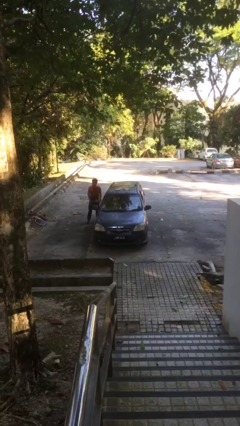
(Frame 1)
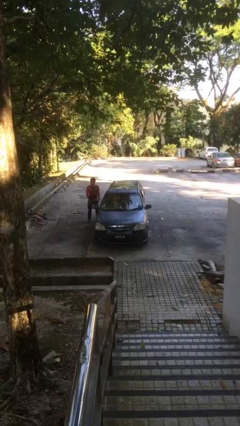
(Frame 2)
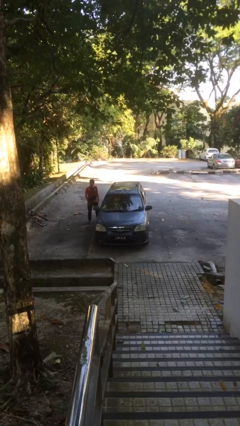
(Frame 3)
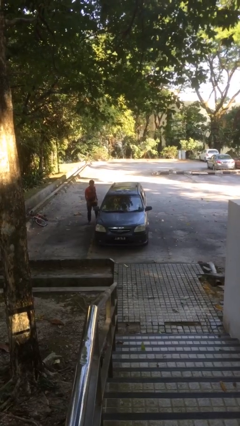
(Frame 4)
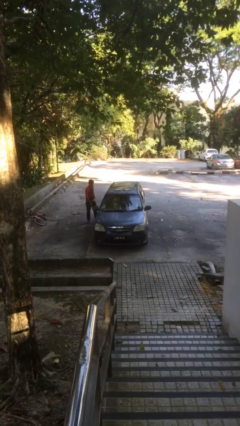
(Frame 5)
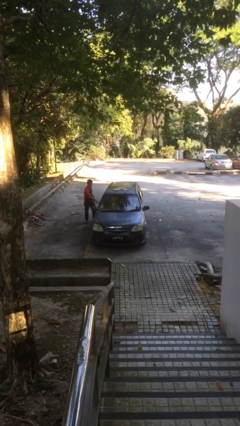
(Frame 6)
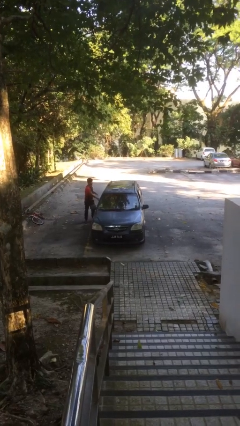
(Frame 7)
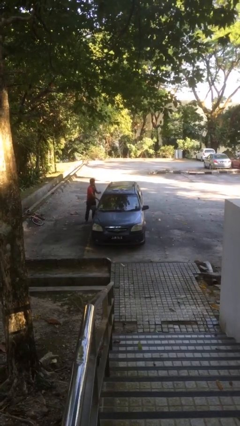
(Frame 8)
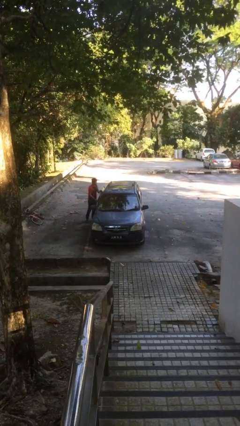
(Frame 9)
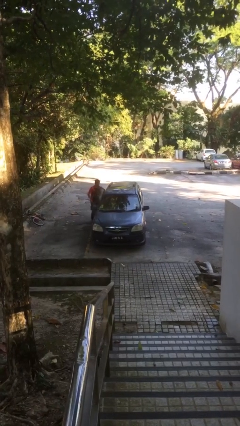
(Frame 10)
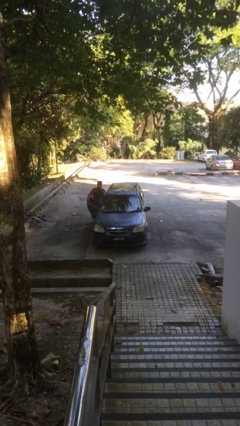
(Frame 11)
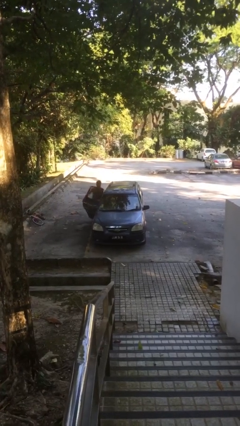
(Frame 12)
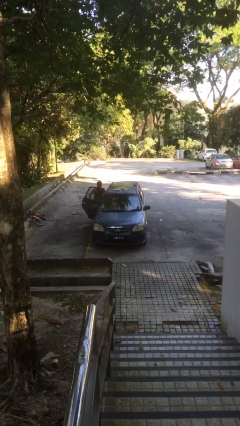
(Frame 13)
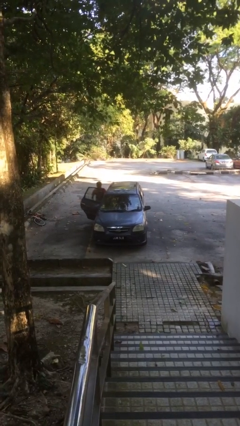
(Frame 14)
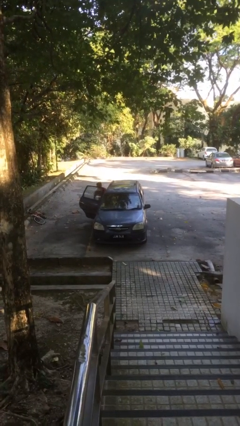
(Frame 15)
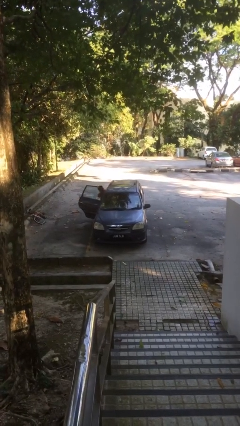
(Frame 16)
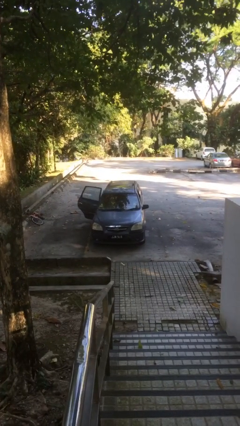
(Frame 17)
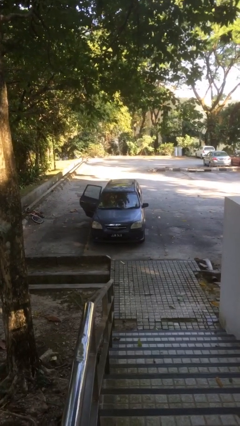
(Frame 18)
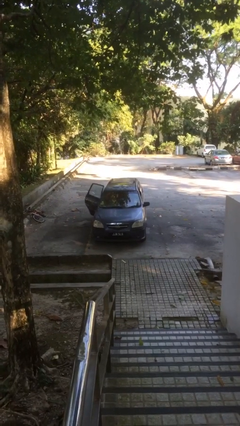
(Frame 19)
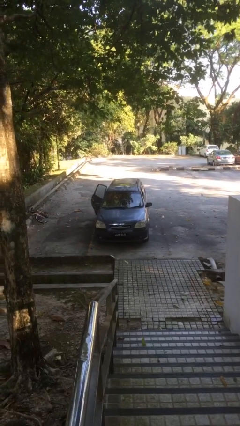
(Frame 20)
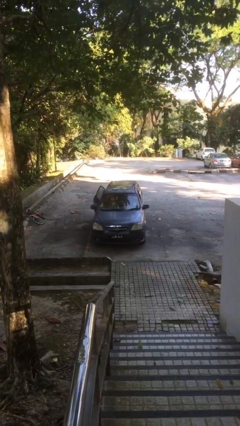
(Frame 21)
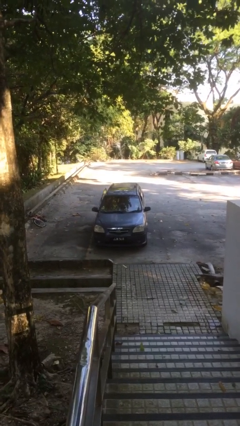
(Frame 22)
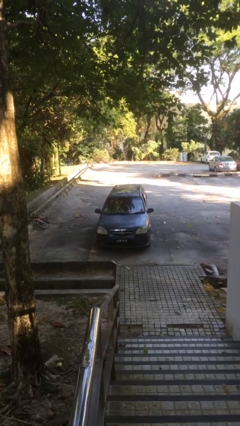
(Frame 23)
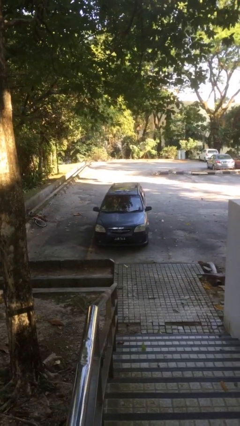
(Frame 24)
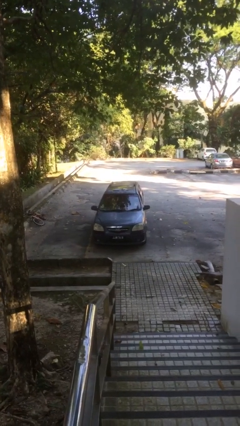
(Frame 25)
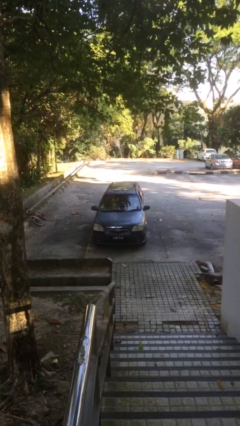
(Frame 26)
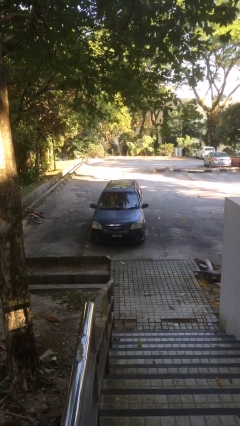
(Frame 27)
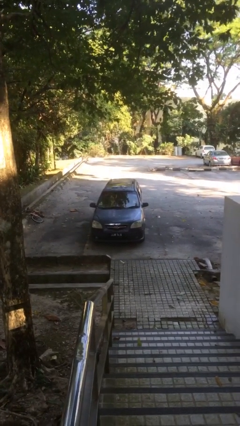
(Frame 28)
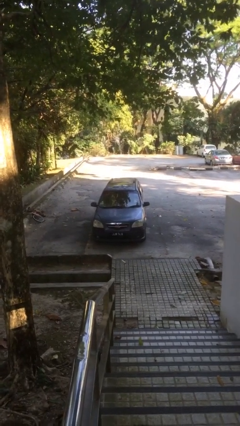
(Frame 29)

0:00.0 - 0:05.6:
car picks up person

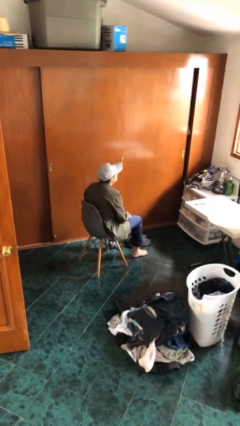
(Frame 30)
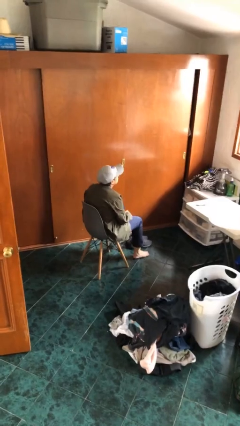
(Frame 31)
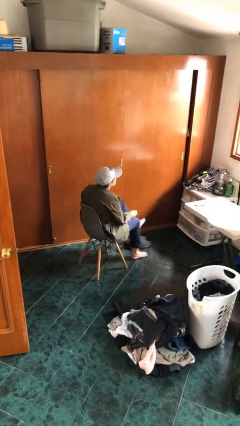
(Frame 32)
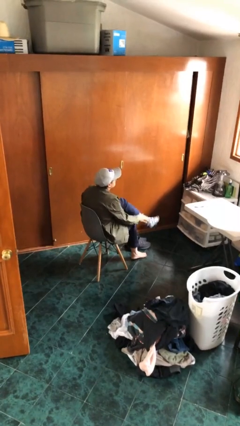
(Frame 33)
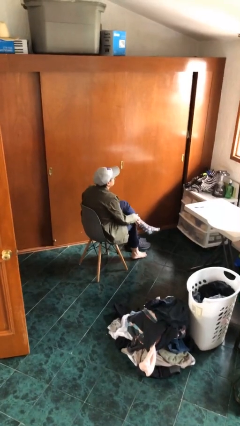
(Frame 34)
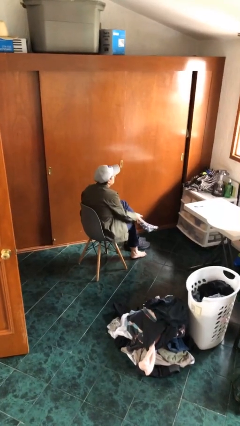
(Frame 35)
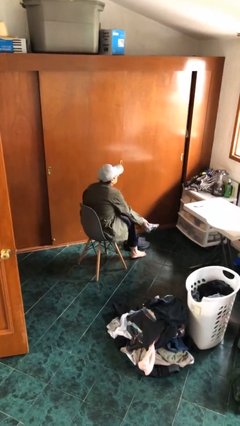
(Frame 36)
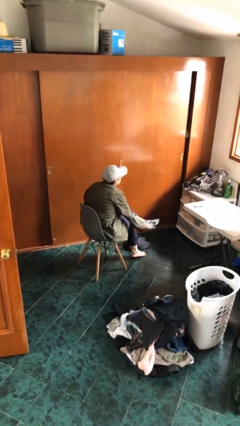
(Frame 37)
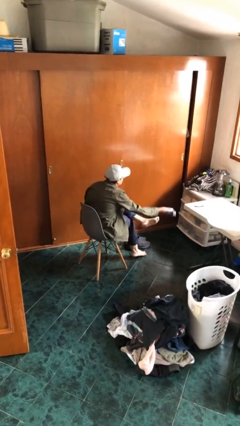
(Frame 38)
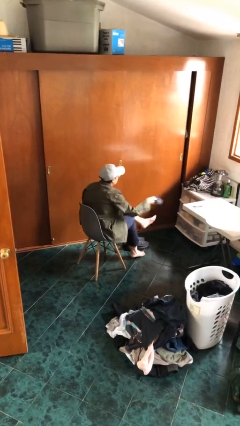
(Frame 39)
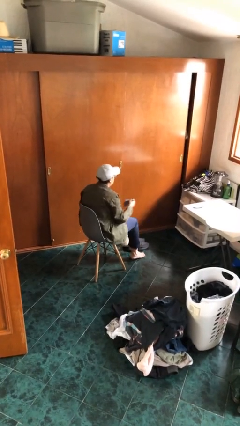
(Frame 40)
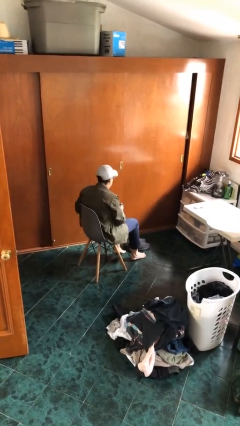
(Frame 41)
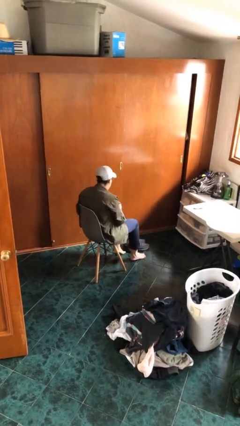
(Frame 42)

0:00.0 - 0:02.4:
person takes off socks

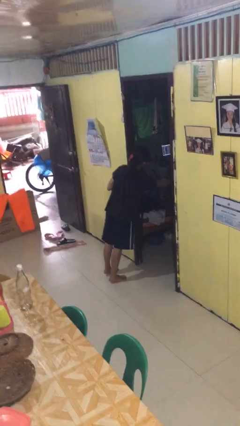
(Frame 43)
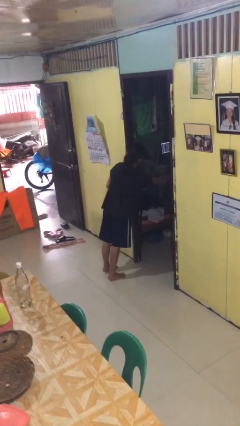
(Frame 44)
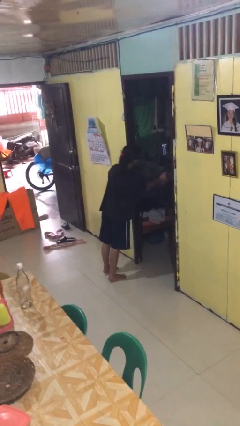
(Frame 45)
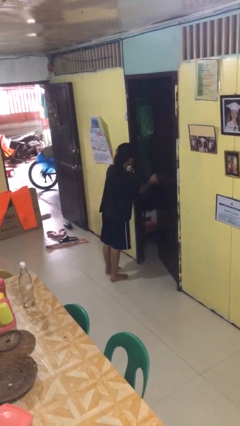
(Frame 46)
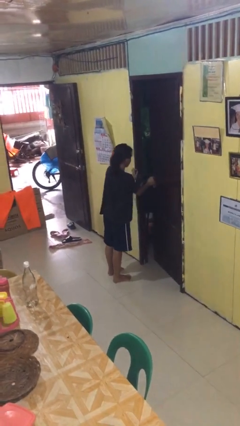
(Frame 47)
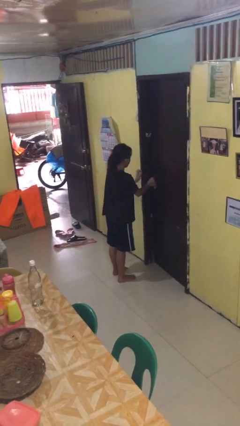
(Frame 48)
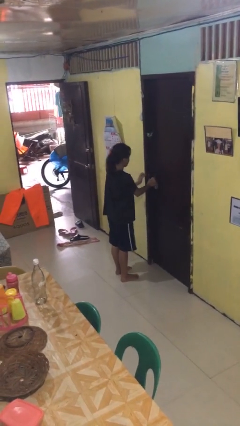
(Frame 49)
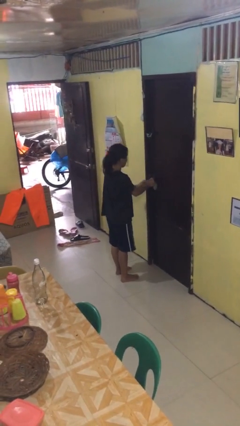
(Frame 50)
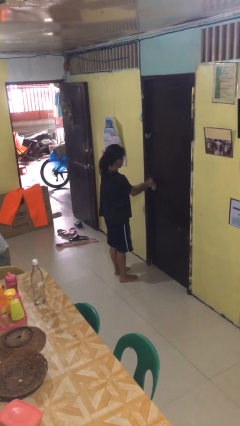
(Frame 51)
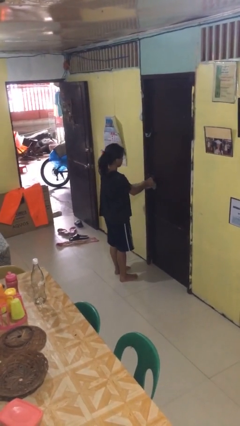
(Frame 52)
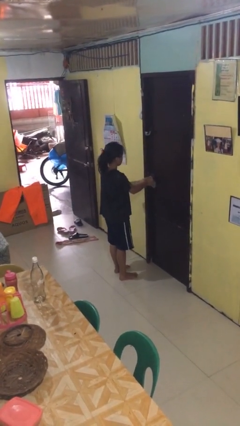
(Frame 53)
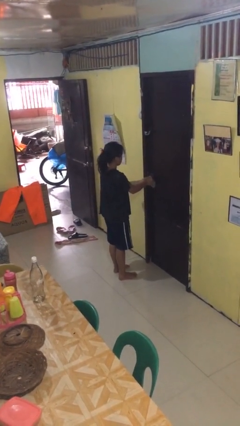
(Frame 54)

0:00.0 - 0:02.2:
person closes facility door

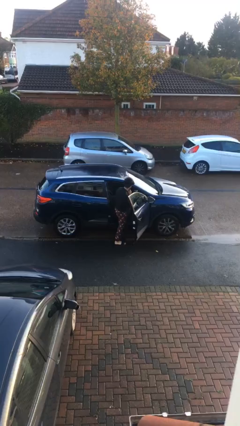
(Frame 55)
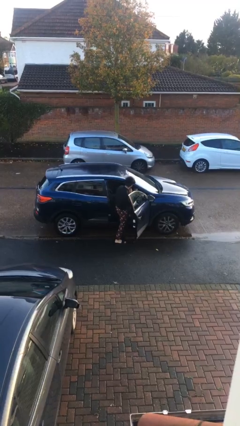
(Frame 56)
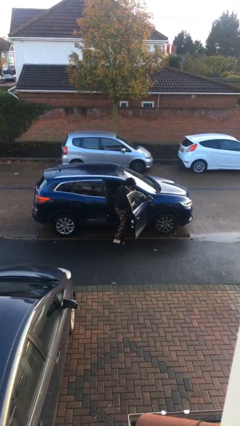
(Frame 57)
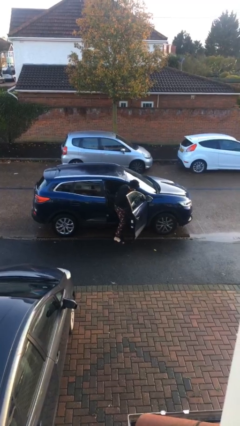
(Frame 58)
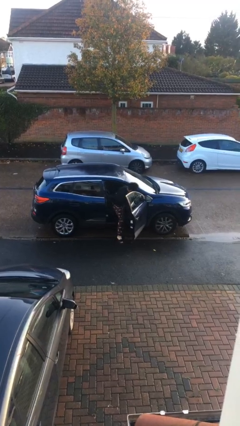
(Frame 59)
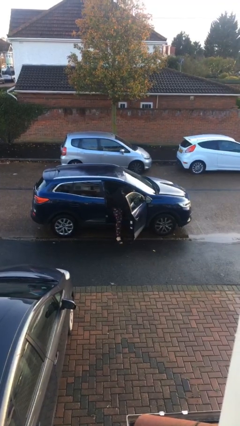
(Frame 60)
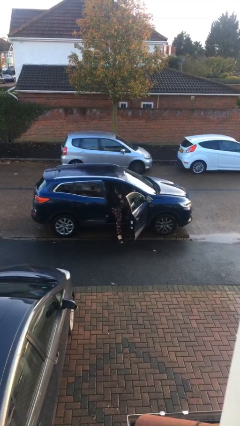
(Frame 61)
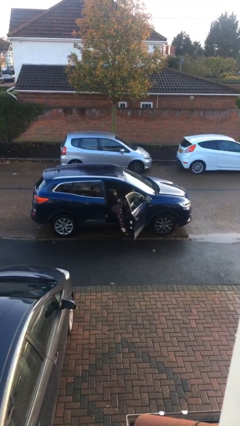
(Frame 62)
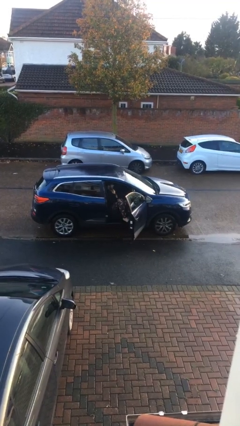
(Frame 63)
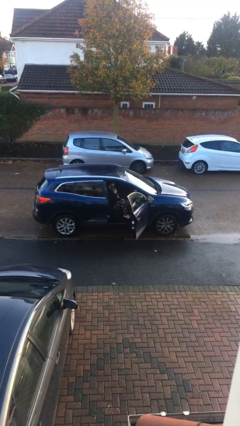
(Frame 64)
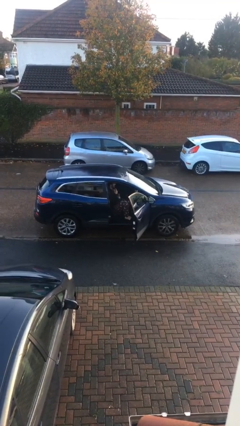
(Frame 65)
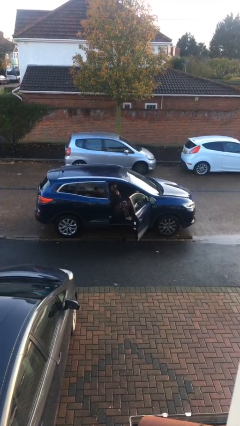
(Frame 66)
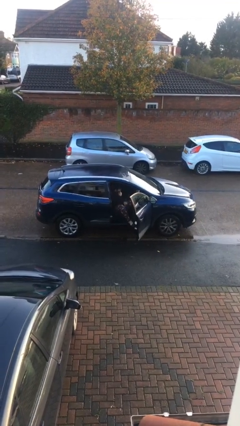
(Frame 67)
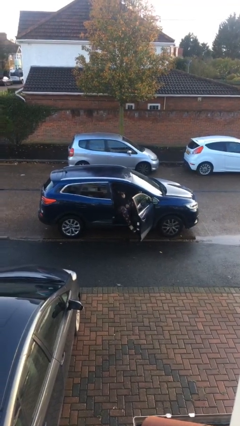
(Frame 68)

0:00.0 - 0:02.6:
person enters car

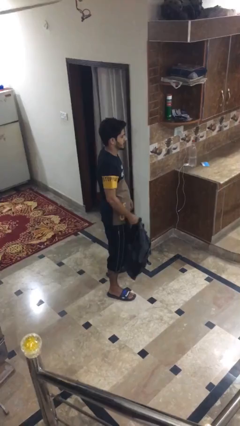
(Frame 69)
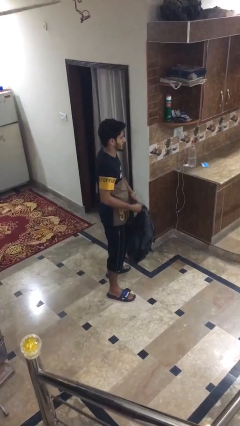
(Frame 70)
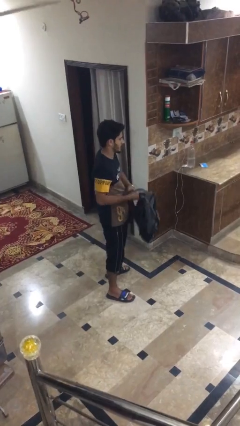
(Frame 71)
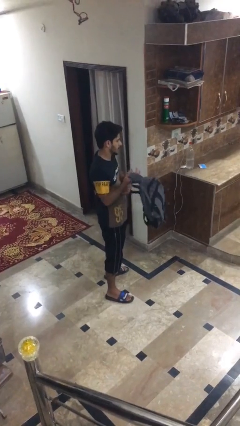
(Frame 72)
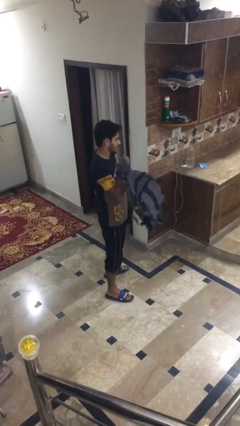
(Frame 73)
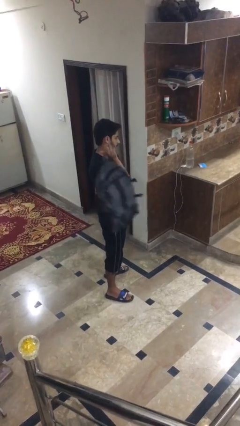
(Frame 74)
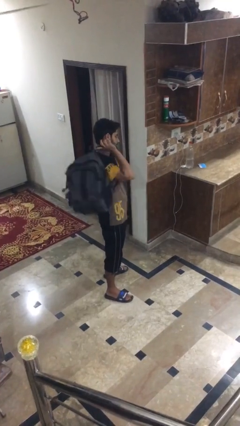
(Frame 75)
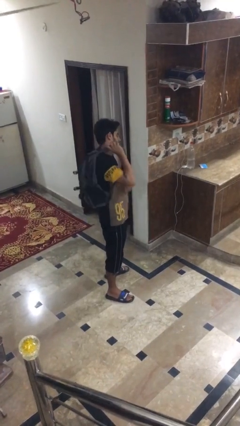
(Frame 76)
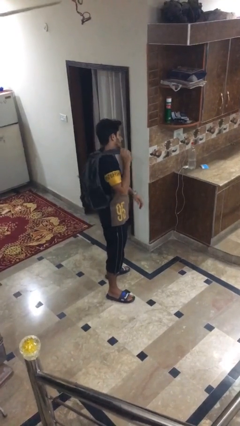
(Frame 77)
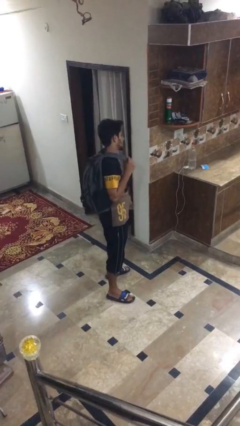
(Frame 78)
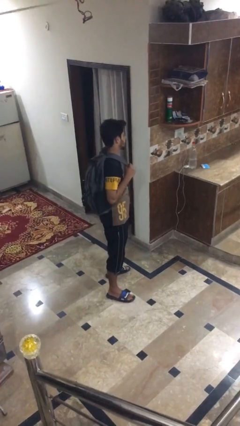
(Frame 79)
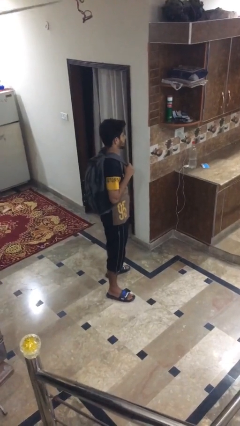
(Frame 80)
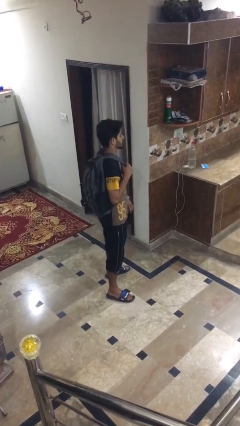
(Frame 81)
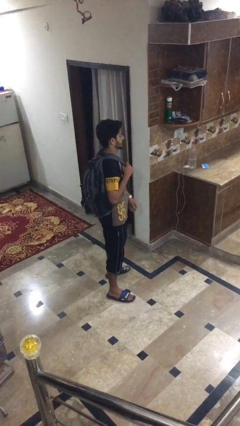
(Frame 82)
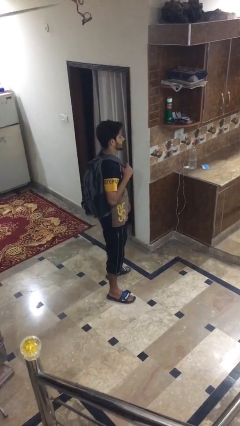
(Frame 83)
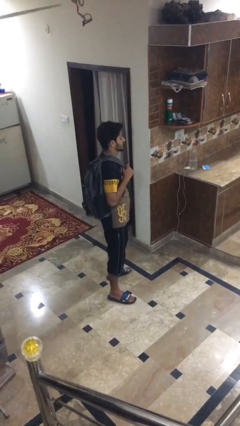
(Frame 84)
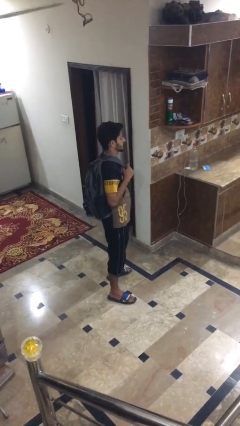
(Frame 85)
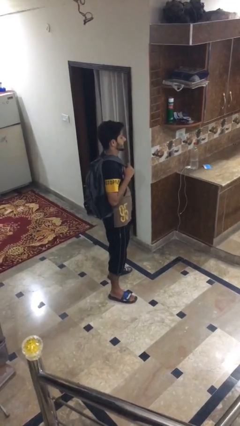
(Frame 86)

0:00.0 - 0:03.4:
person puts on backpack

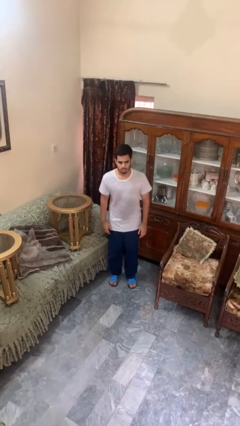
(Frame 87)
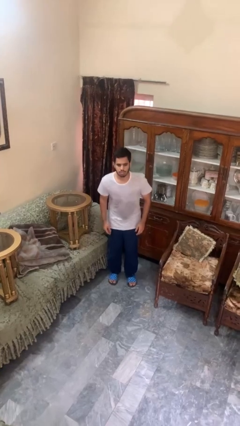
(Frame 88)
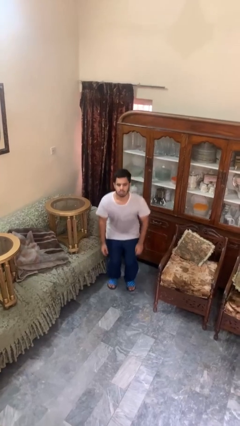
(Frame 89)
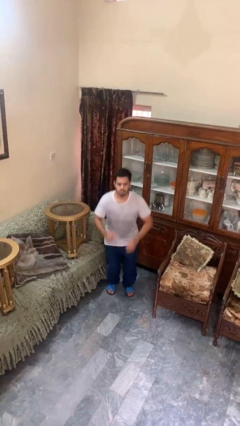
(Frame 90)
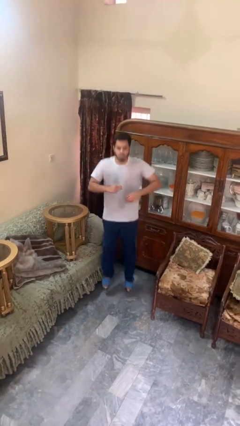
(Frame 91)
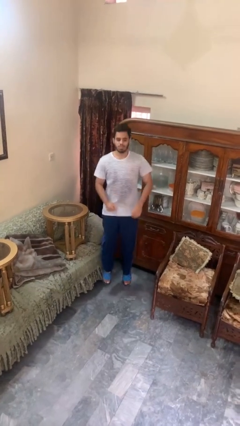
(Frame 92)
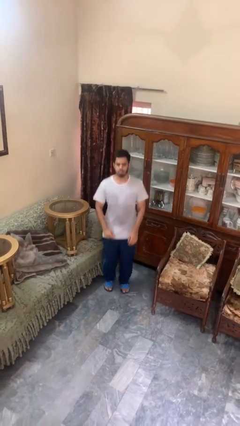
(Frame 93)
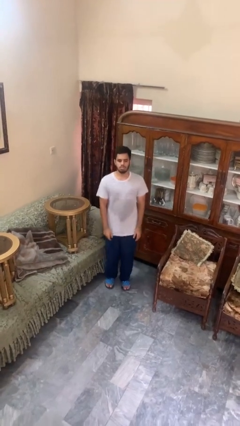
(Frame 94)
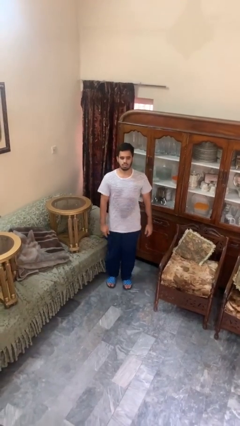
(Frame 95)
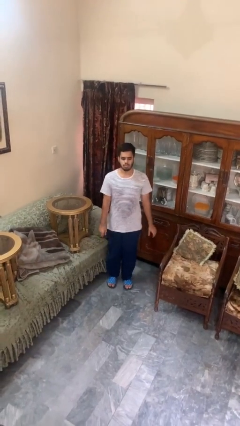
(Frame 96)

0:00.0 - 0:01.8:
person jumps
